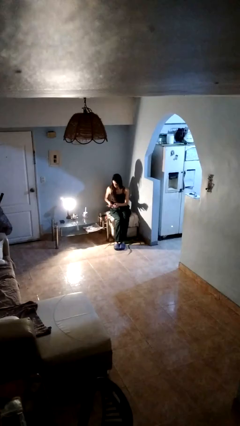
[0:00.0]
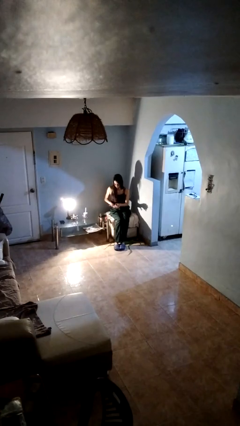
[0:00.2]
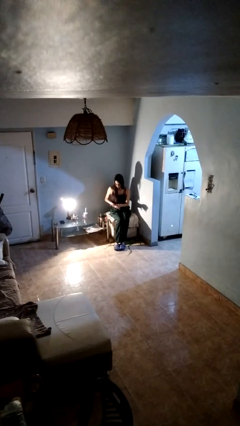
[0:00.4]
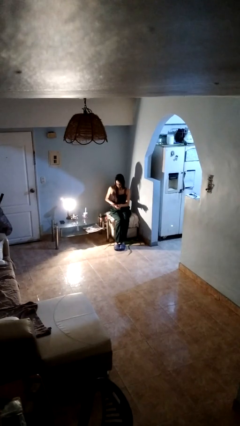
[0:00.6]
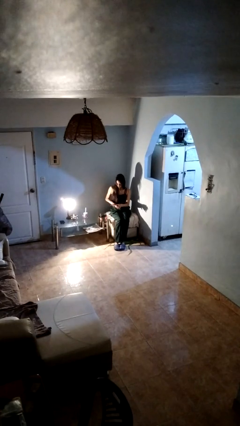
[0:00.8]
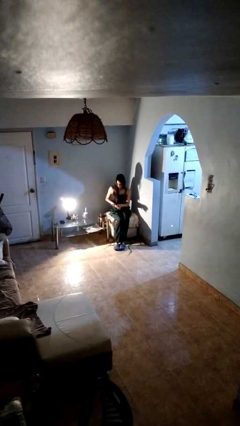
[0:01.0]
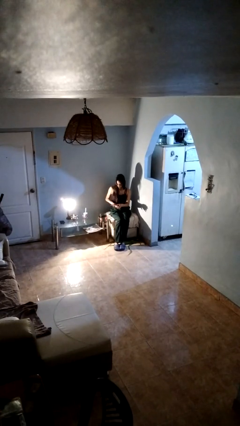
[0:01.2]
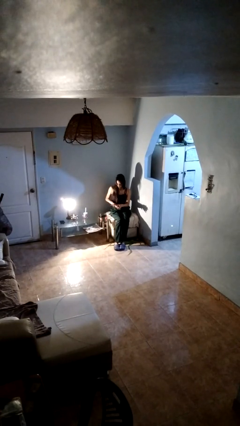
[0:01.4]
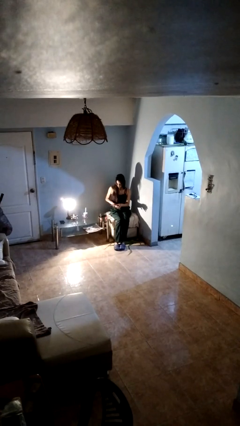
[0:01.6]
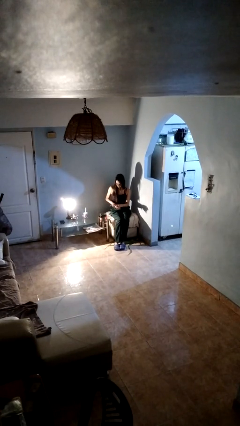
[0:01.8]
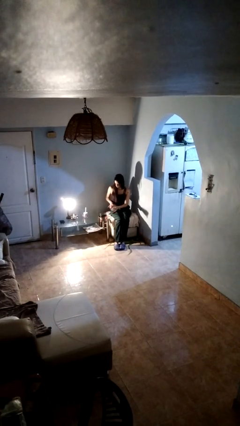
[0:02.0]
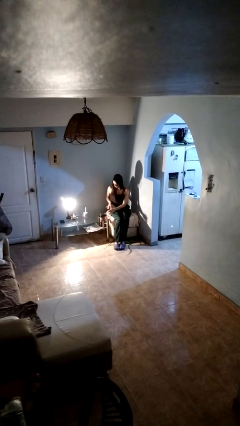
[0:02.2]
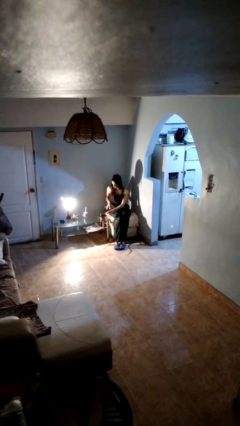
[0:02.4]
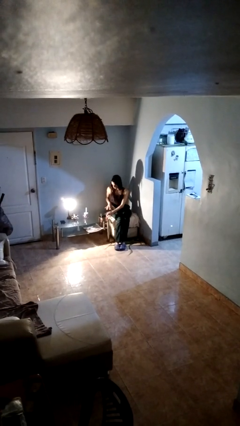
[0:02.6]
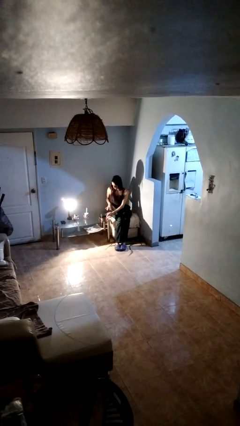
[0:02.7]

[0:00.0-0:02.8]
person paints fingernails

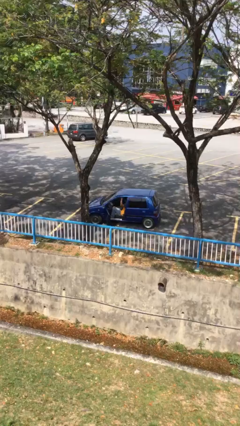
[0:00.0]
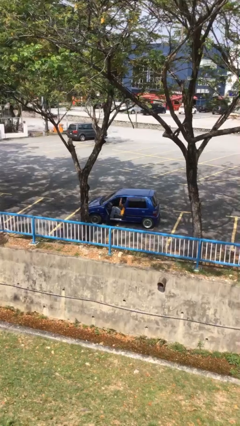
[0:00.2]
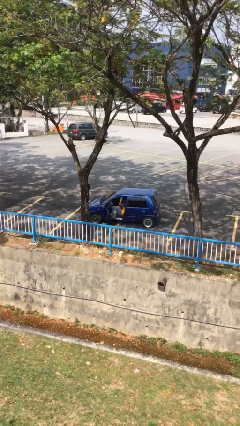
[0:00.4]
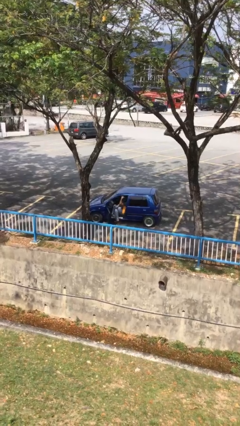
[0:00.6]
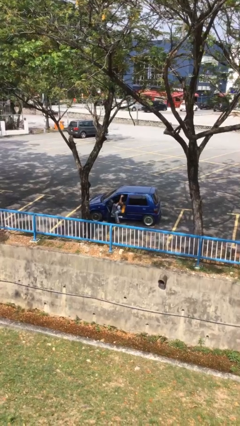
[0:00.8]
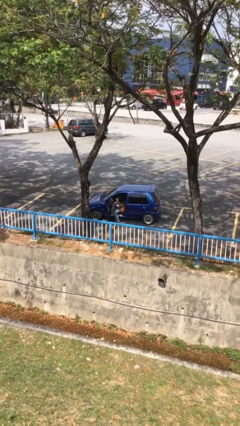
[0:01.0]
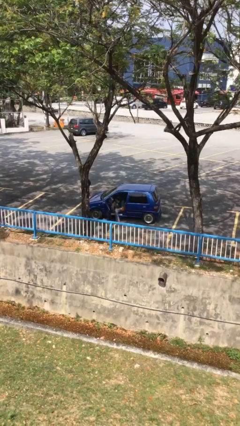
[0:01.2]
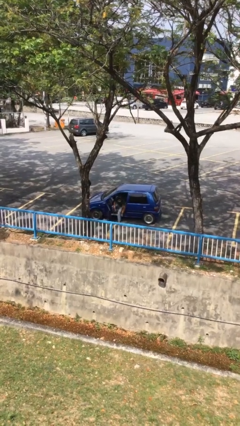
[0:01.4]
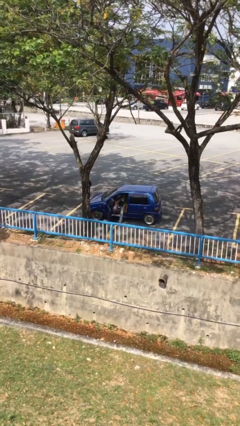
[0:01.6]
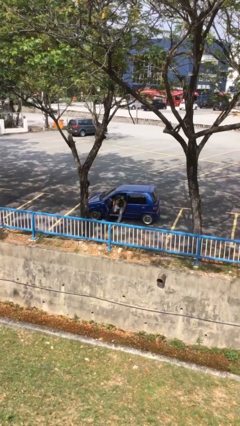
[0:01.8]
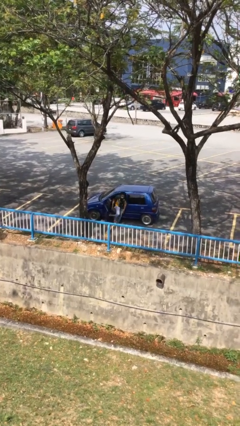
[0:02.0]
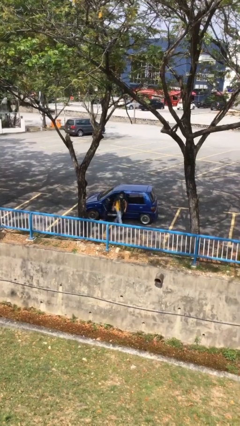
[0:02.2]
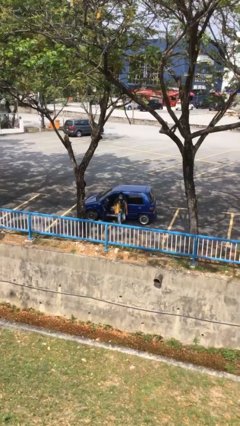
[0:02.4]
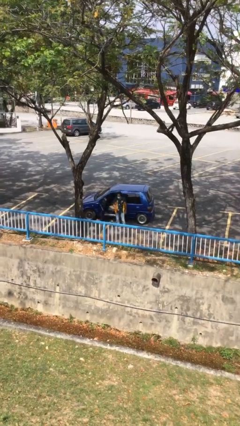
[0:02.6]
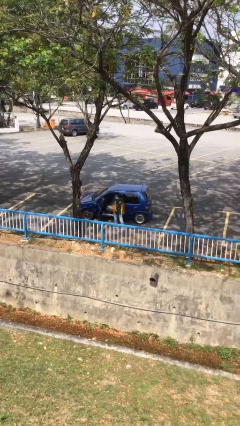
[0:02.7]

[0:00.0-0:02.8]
person exits car

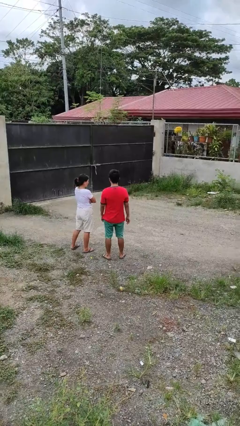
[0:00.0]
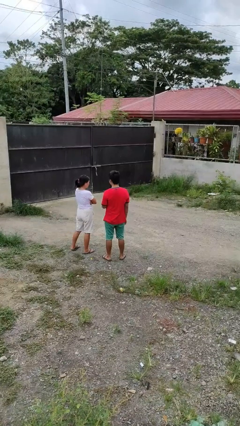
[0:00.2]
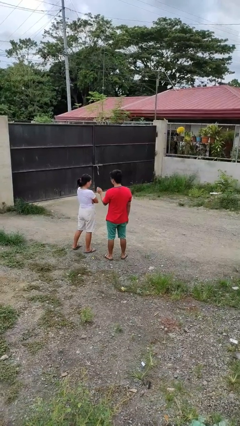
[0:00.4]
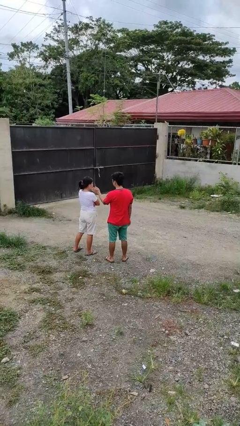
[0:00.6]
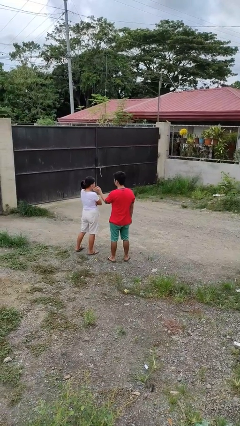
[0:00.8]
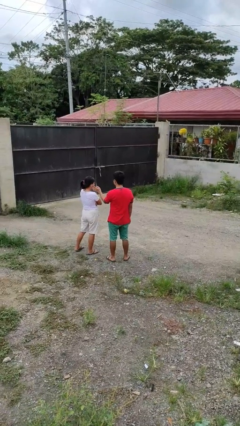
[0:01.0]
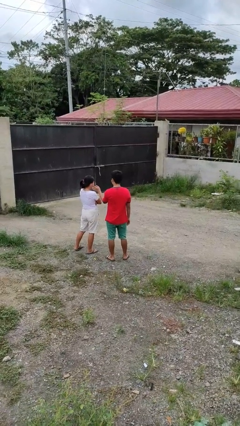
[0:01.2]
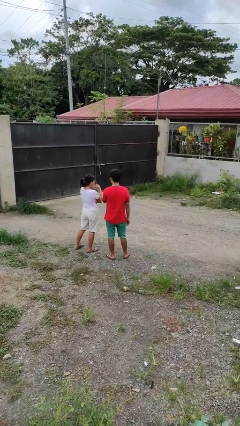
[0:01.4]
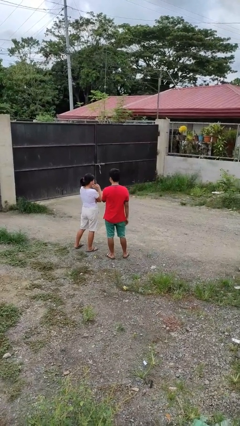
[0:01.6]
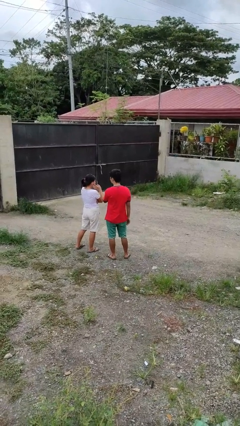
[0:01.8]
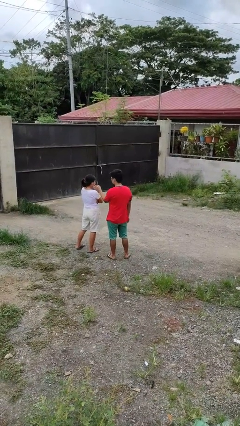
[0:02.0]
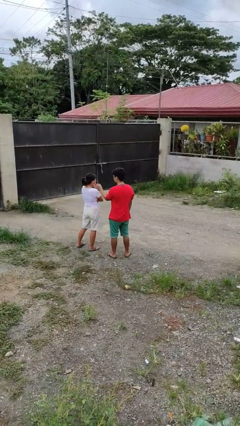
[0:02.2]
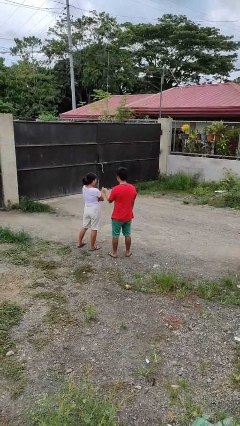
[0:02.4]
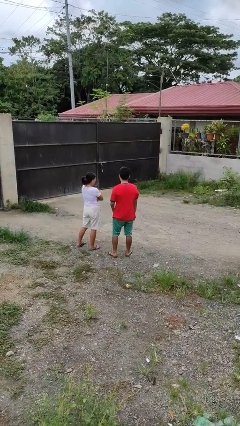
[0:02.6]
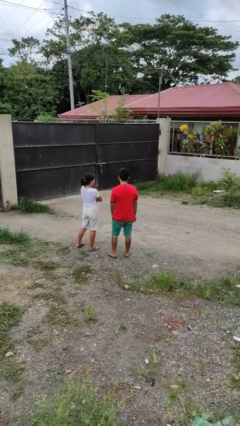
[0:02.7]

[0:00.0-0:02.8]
person touches face of person

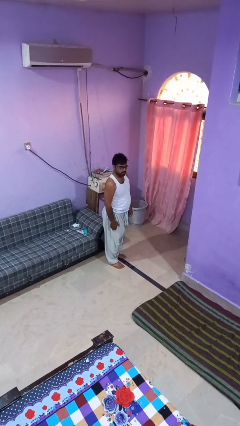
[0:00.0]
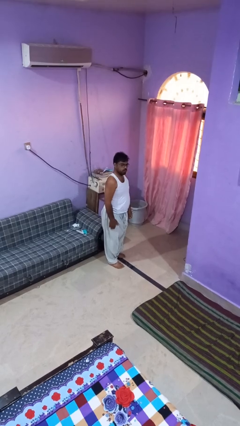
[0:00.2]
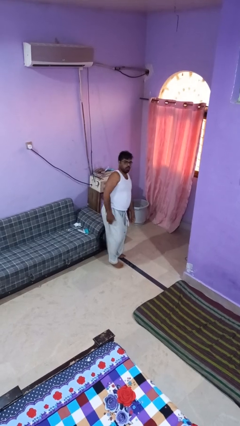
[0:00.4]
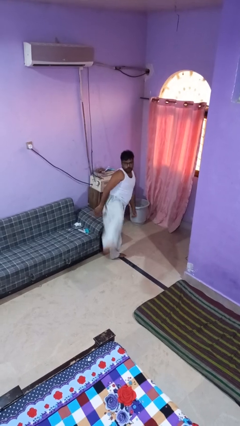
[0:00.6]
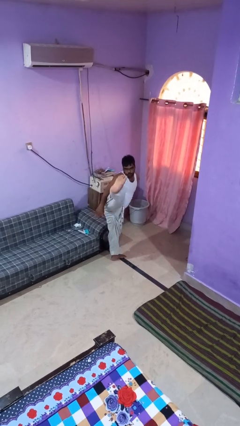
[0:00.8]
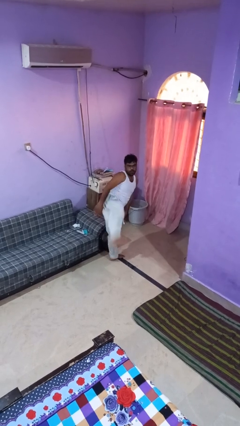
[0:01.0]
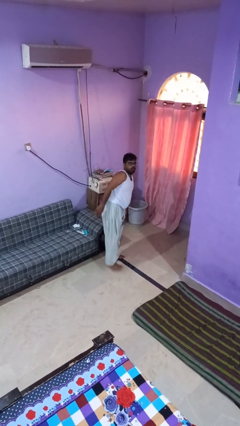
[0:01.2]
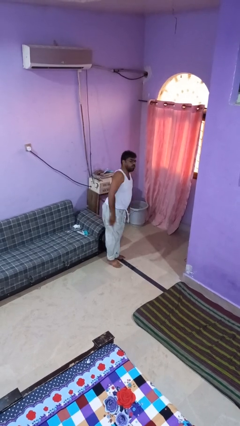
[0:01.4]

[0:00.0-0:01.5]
person karate kicks

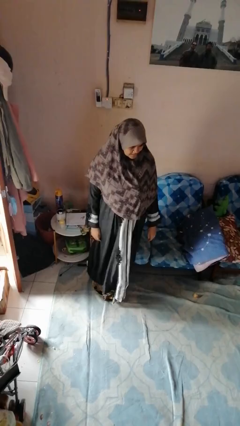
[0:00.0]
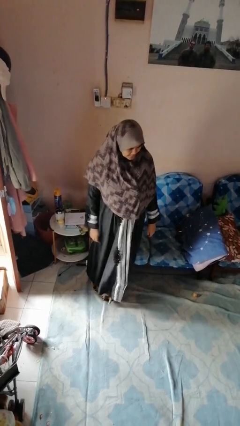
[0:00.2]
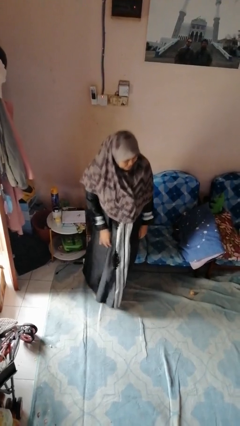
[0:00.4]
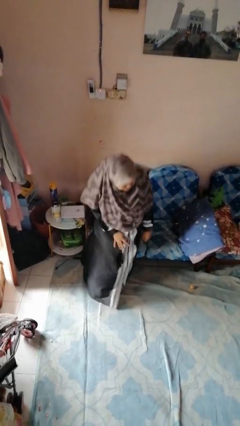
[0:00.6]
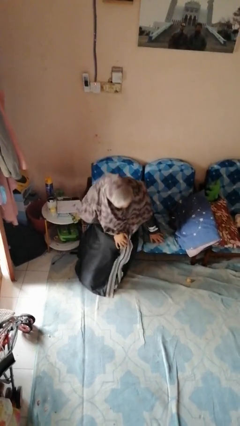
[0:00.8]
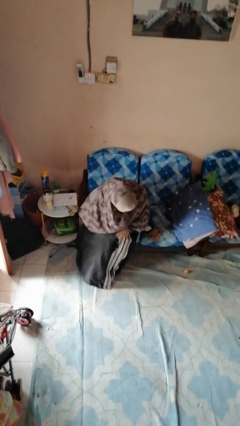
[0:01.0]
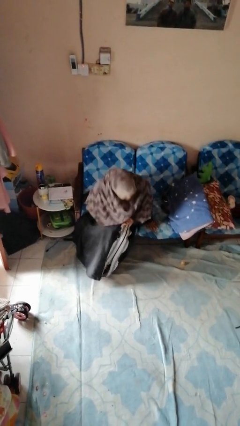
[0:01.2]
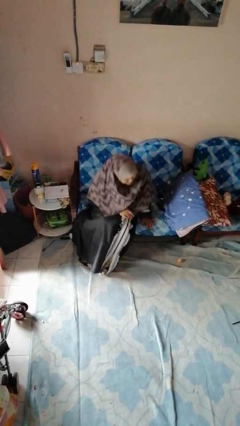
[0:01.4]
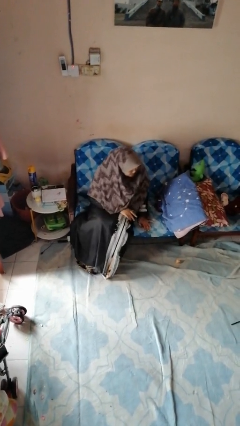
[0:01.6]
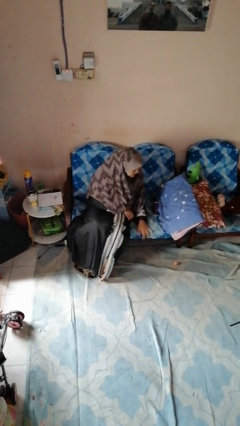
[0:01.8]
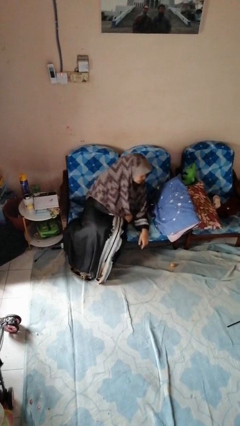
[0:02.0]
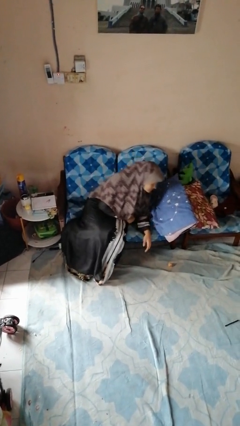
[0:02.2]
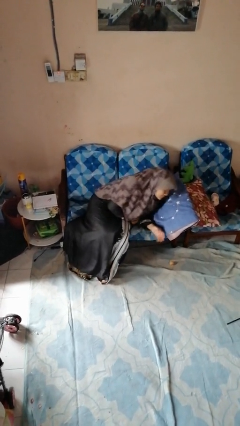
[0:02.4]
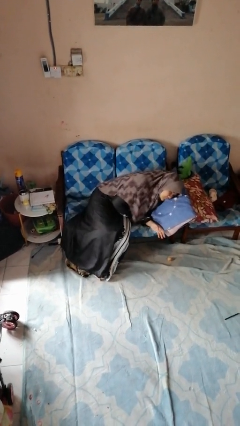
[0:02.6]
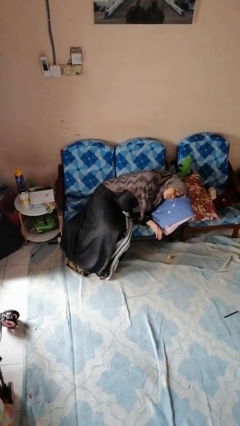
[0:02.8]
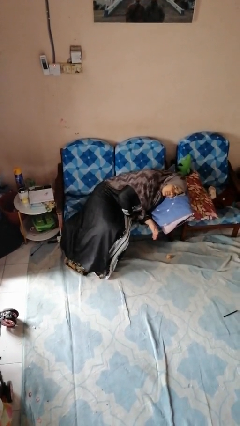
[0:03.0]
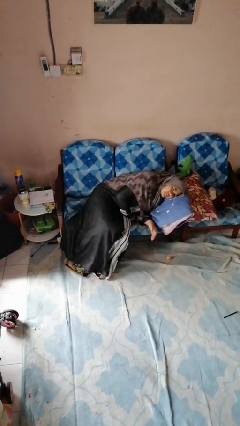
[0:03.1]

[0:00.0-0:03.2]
person lies down on couch

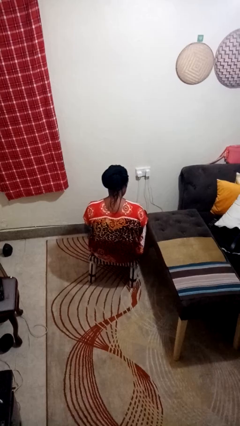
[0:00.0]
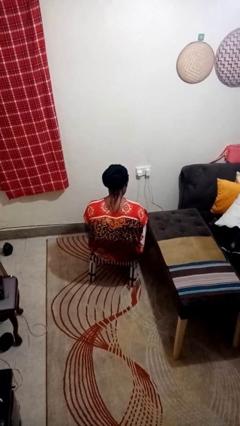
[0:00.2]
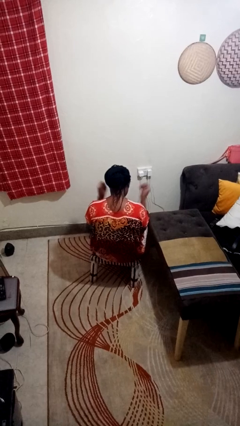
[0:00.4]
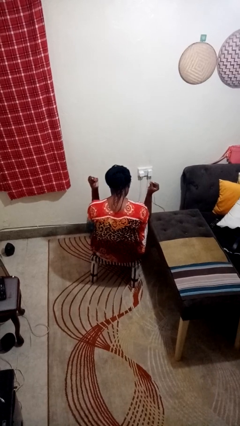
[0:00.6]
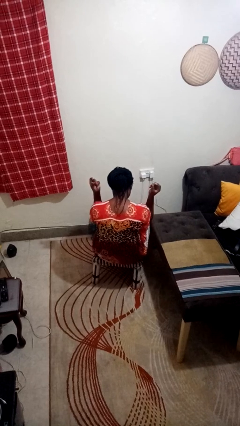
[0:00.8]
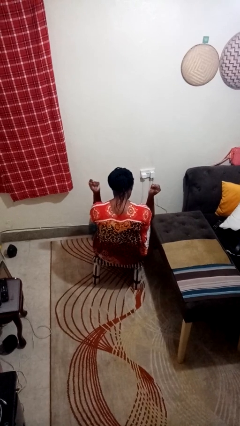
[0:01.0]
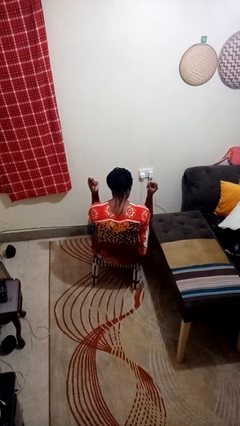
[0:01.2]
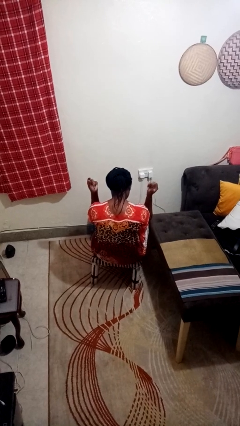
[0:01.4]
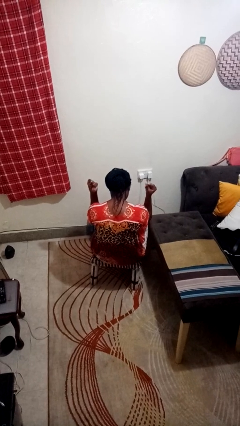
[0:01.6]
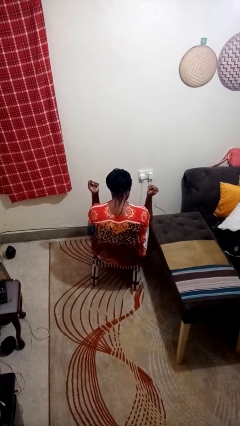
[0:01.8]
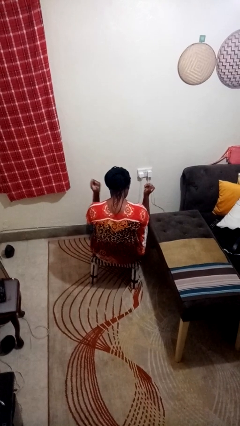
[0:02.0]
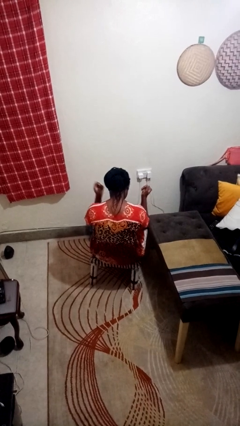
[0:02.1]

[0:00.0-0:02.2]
person snaps fingers

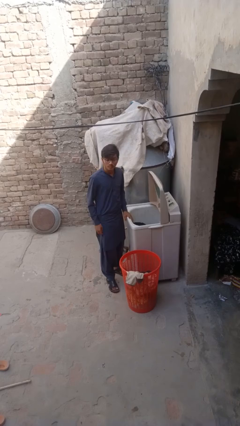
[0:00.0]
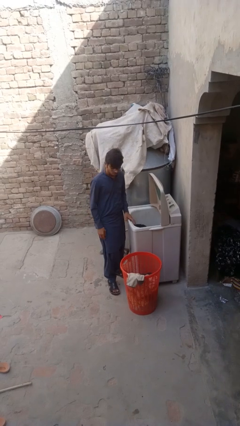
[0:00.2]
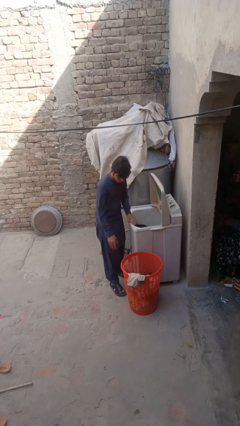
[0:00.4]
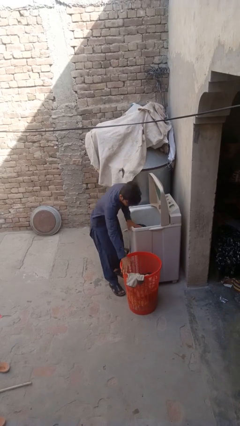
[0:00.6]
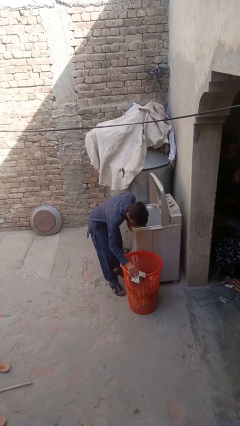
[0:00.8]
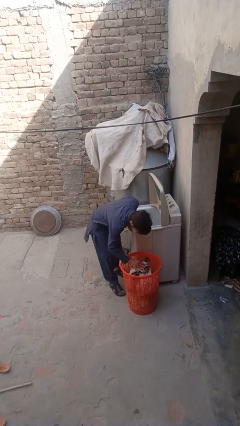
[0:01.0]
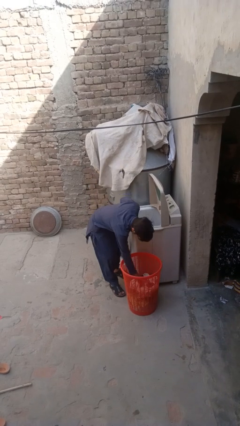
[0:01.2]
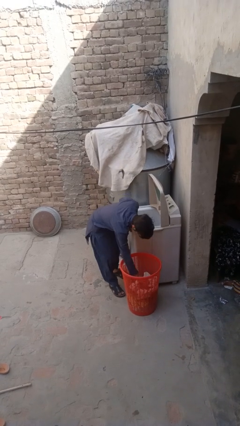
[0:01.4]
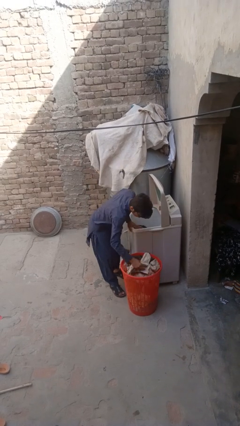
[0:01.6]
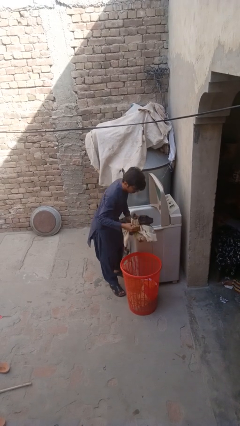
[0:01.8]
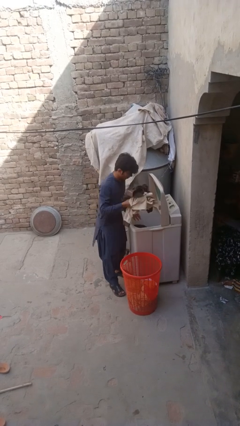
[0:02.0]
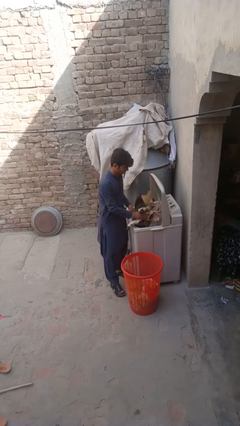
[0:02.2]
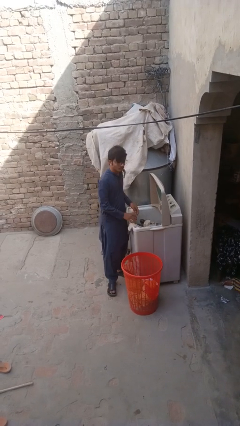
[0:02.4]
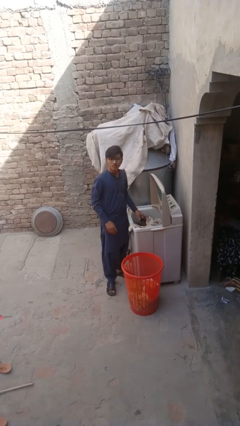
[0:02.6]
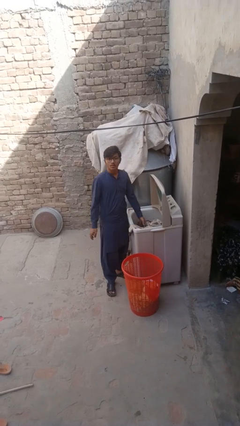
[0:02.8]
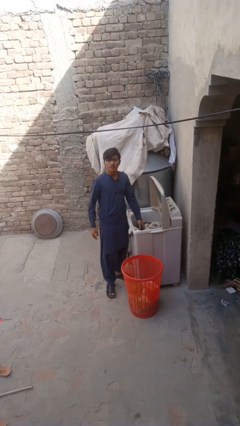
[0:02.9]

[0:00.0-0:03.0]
person loads clotheswasher
